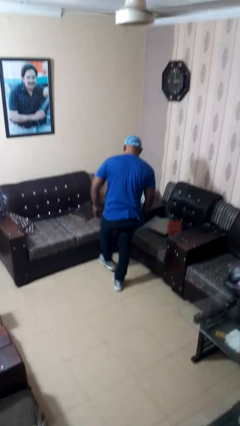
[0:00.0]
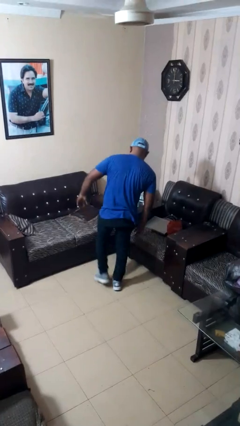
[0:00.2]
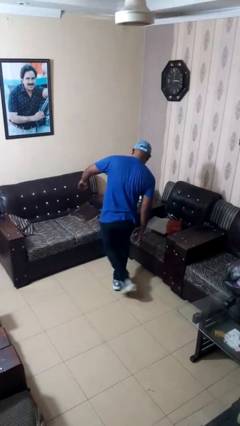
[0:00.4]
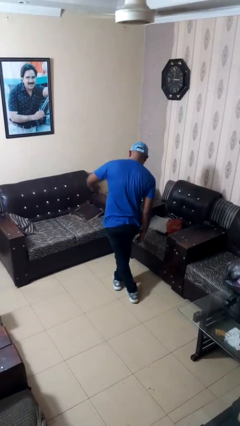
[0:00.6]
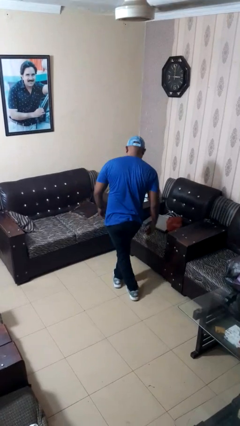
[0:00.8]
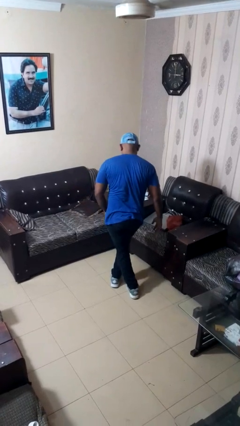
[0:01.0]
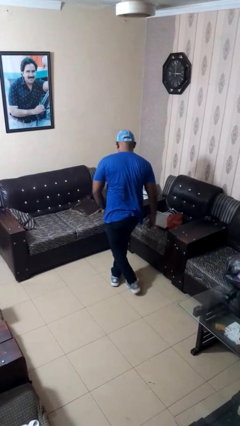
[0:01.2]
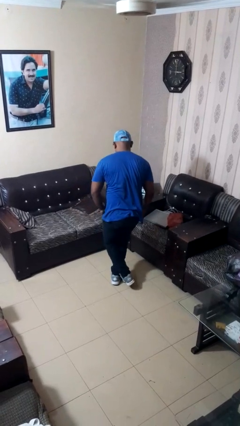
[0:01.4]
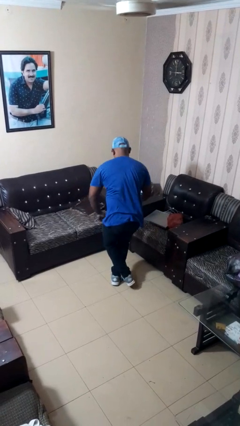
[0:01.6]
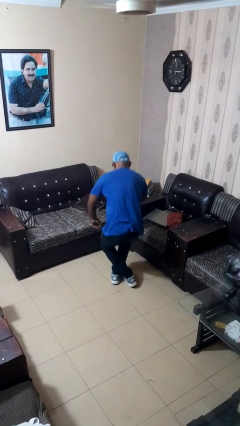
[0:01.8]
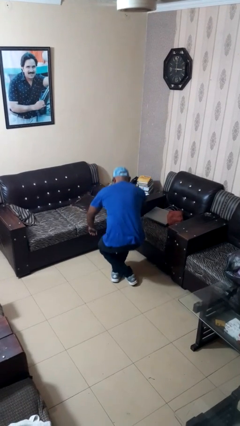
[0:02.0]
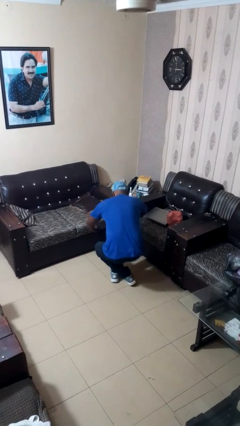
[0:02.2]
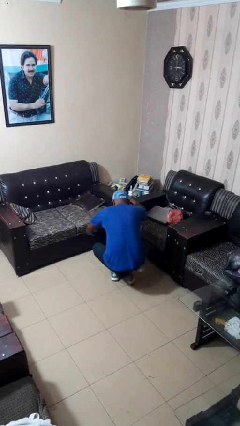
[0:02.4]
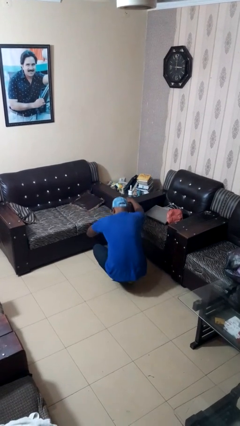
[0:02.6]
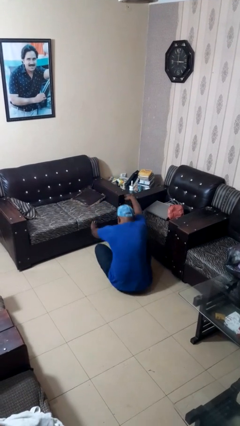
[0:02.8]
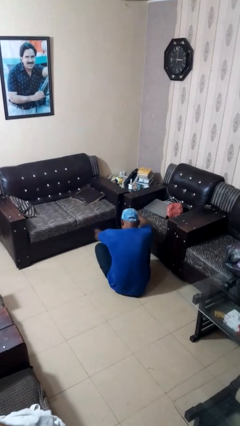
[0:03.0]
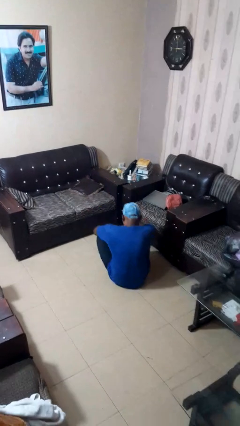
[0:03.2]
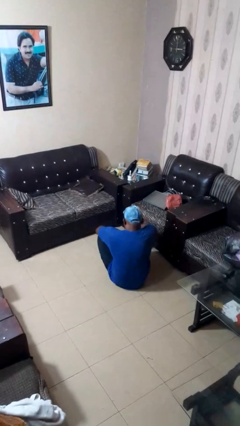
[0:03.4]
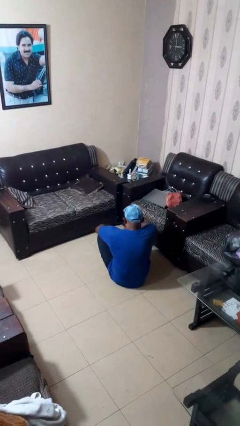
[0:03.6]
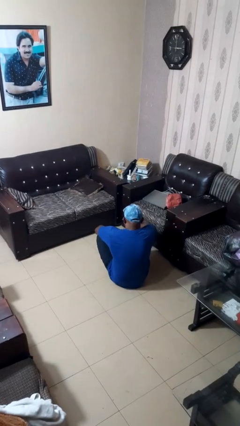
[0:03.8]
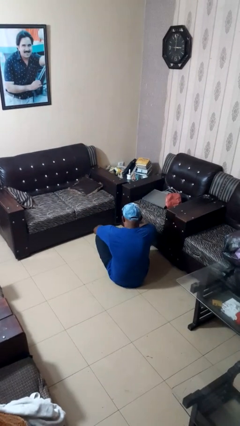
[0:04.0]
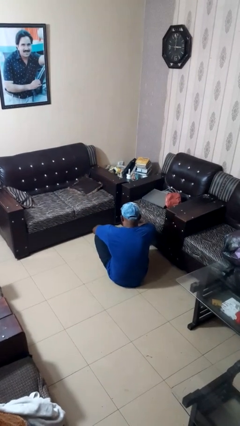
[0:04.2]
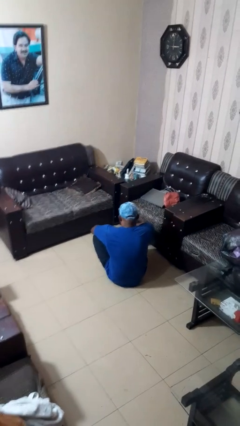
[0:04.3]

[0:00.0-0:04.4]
person sits crisscross

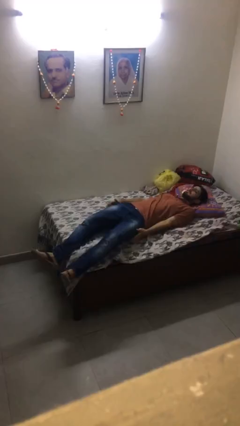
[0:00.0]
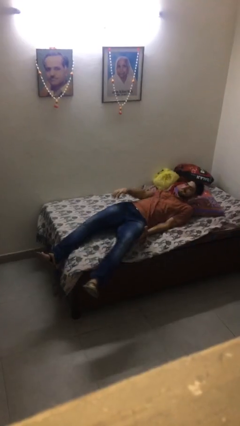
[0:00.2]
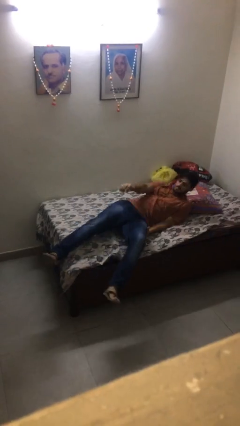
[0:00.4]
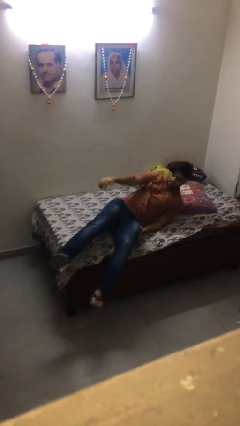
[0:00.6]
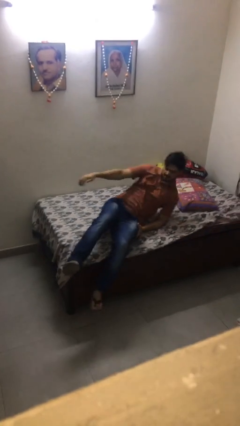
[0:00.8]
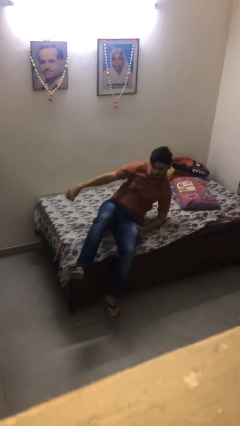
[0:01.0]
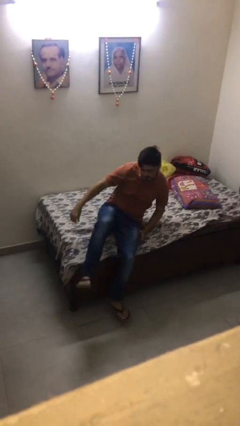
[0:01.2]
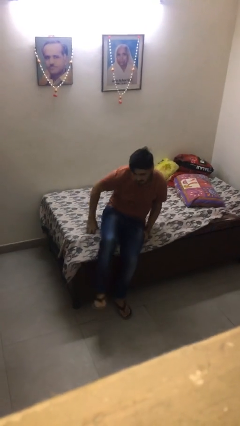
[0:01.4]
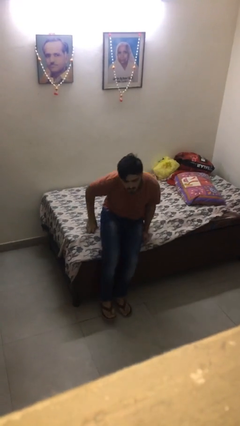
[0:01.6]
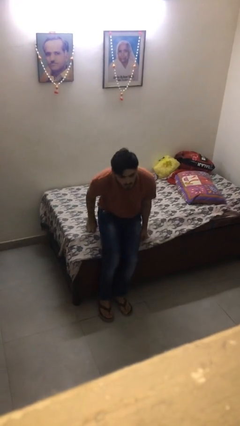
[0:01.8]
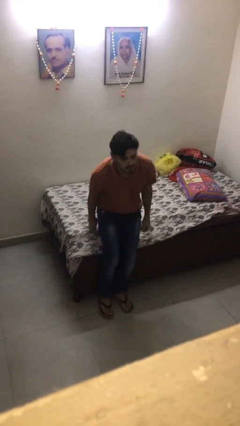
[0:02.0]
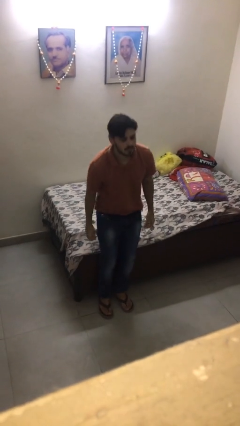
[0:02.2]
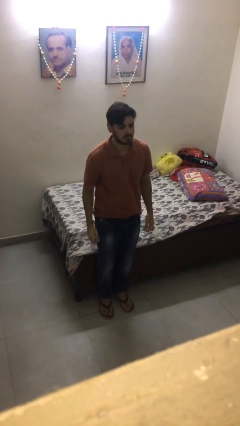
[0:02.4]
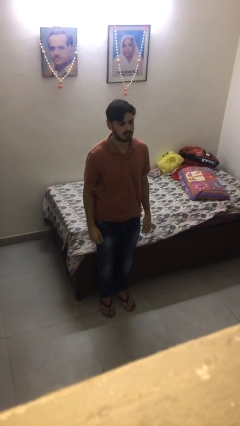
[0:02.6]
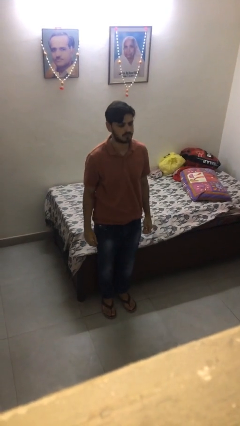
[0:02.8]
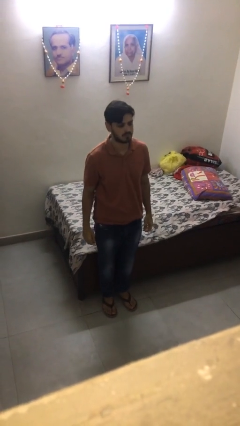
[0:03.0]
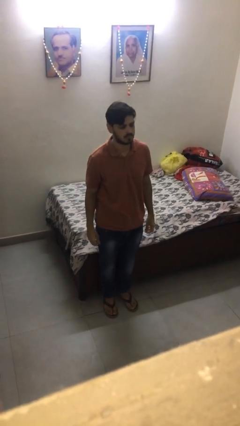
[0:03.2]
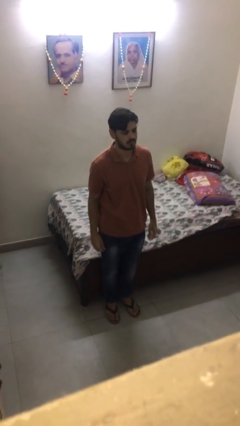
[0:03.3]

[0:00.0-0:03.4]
person stands up

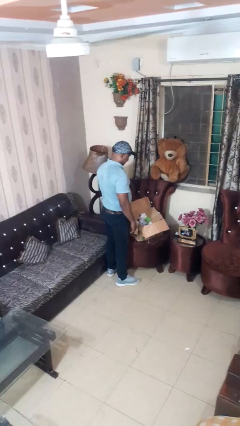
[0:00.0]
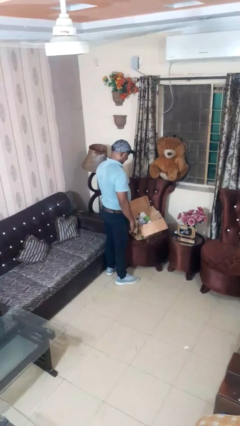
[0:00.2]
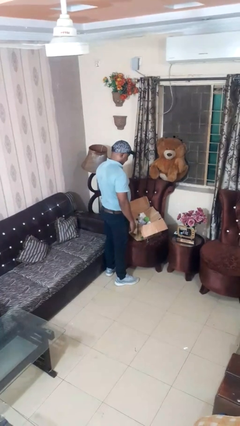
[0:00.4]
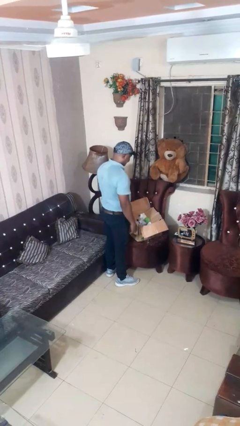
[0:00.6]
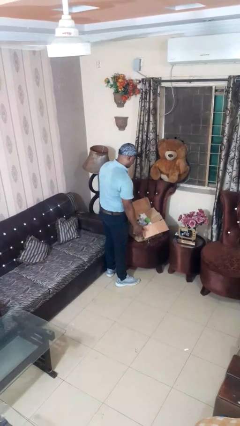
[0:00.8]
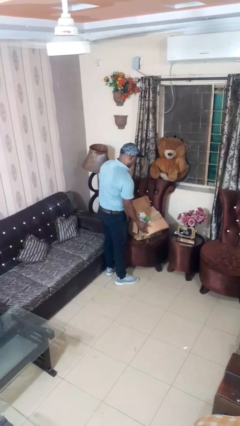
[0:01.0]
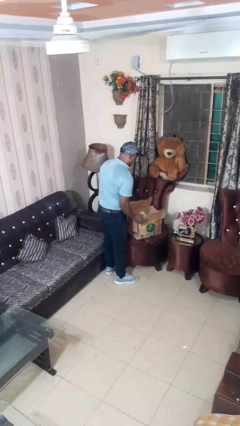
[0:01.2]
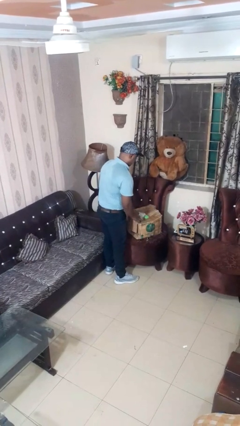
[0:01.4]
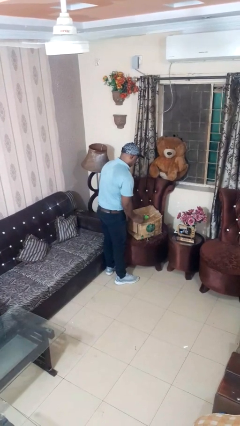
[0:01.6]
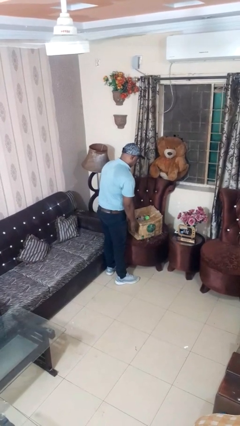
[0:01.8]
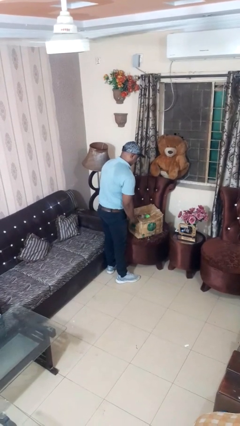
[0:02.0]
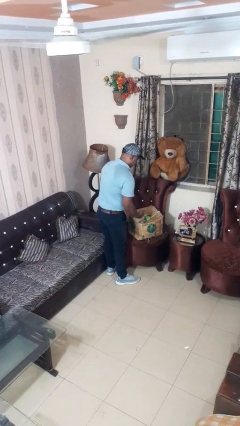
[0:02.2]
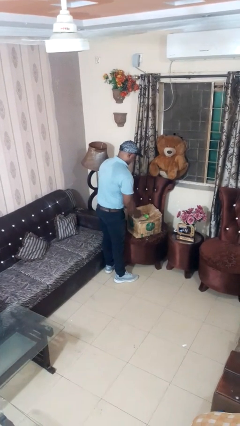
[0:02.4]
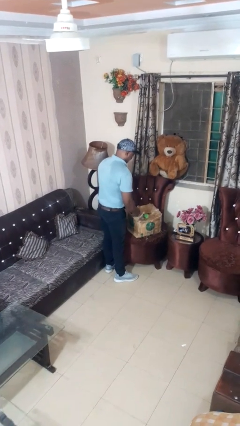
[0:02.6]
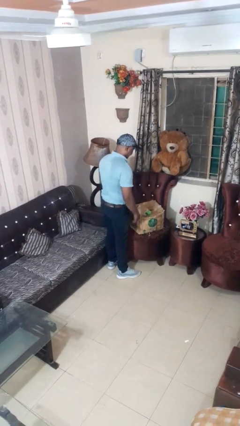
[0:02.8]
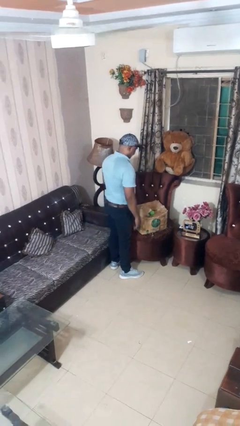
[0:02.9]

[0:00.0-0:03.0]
person closes box

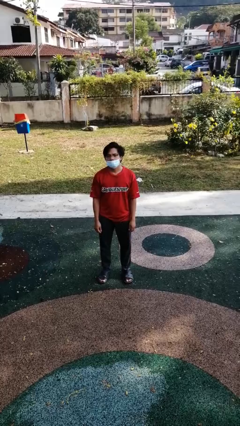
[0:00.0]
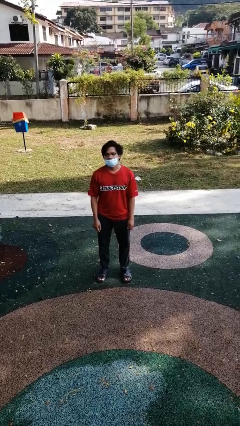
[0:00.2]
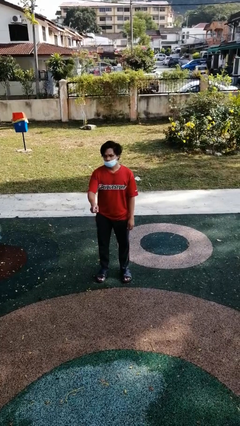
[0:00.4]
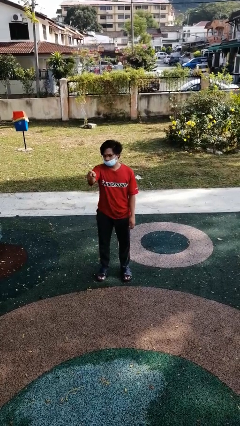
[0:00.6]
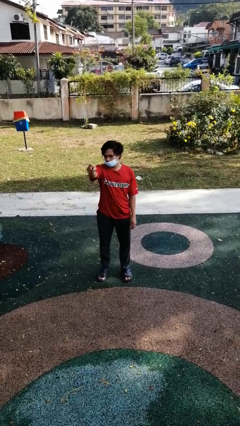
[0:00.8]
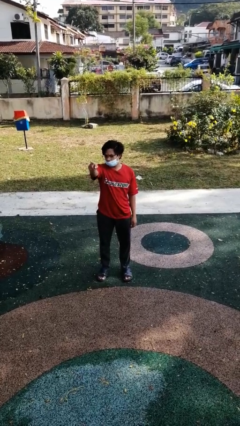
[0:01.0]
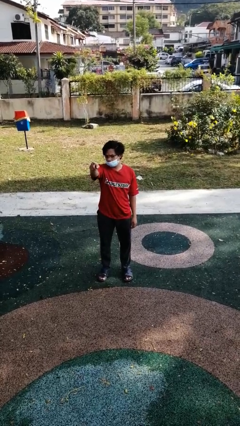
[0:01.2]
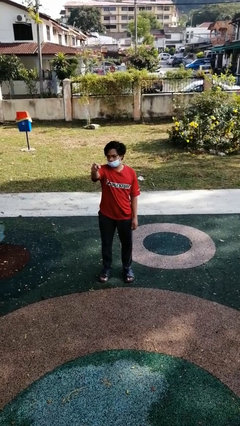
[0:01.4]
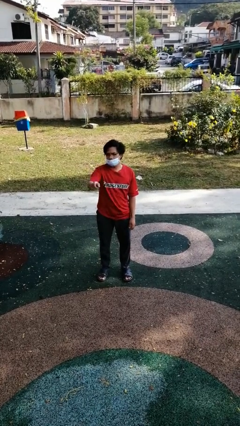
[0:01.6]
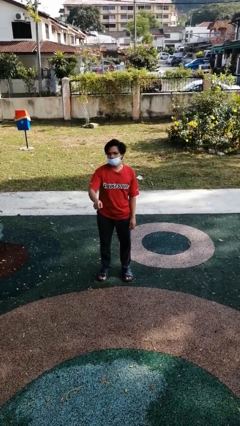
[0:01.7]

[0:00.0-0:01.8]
person points at person

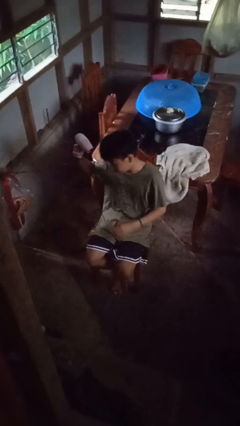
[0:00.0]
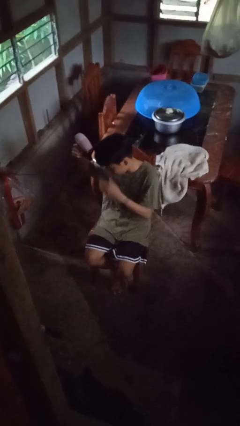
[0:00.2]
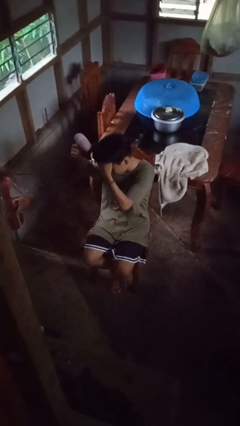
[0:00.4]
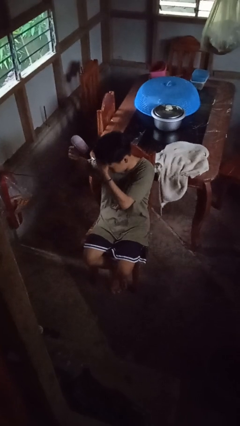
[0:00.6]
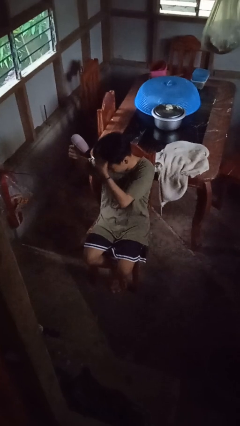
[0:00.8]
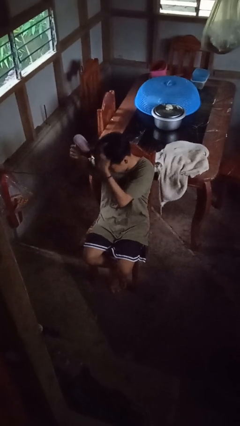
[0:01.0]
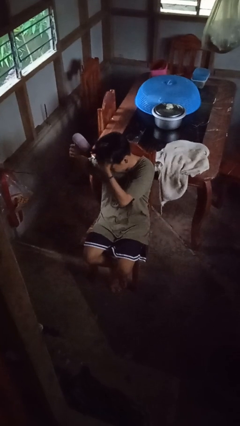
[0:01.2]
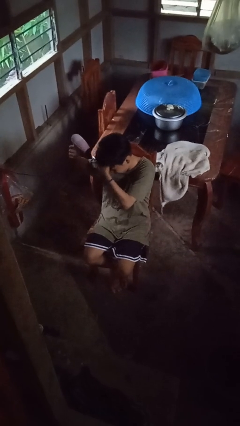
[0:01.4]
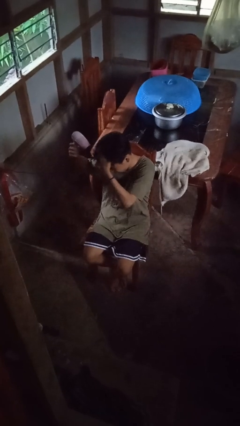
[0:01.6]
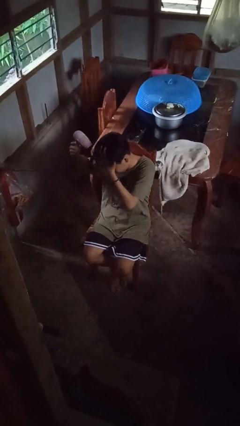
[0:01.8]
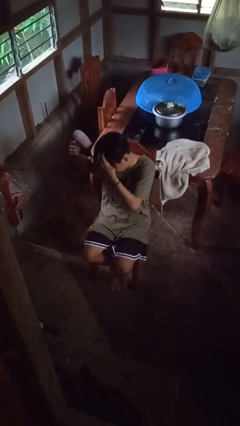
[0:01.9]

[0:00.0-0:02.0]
person dries hair with hairdryer

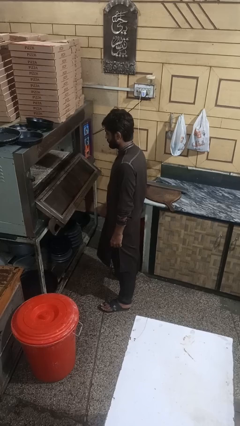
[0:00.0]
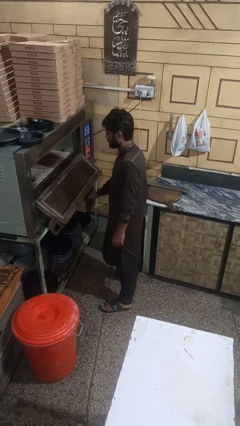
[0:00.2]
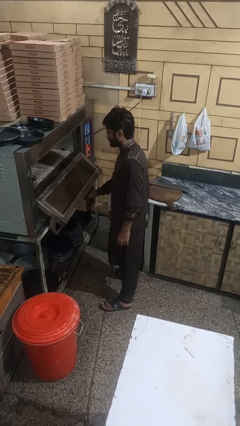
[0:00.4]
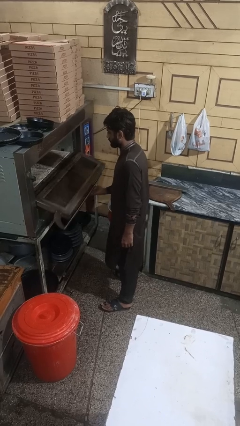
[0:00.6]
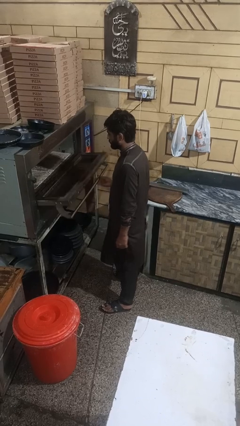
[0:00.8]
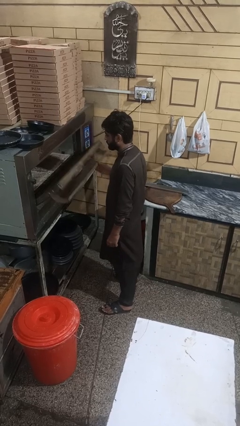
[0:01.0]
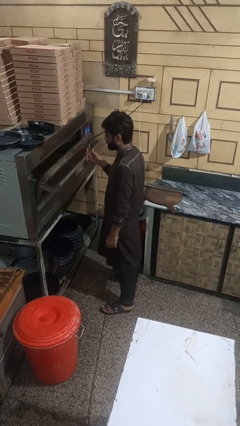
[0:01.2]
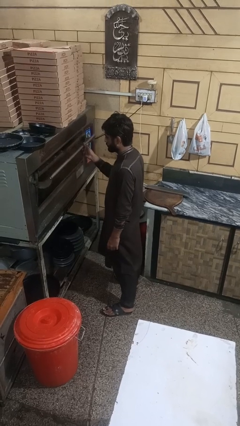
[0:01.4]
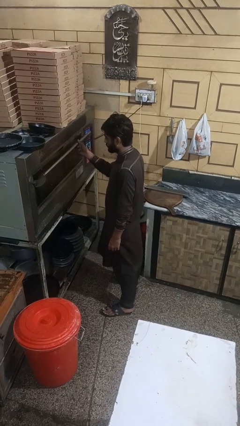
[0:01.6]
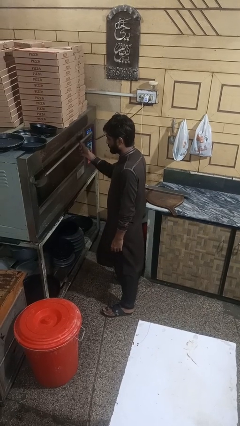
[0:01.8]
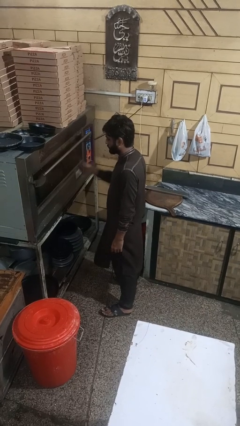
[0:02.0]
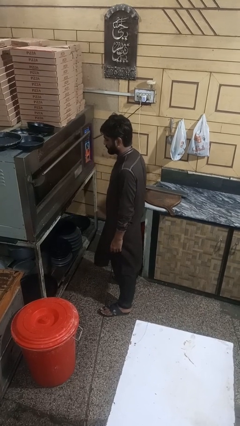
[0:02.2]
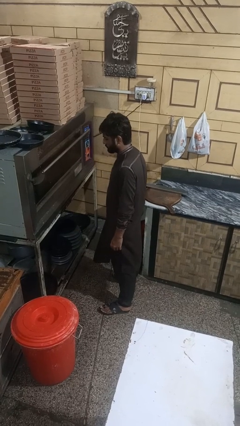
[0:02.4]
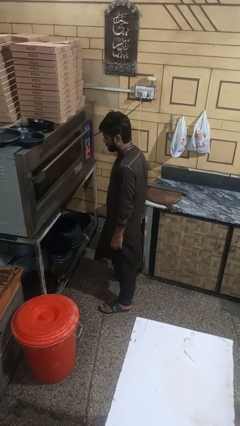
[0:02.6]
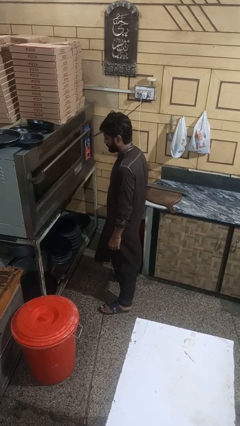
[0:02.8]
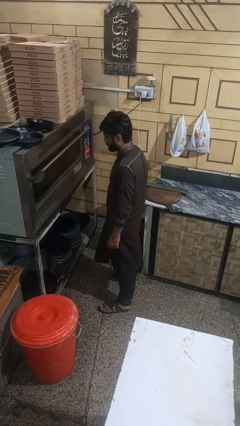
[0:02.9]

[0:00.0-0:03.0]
person closes microwave
